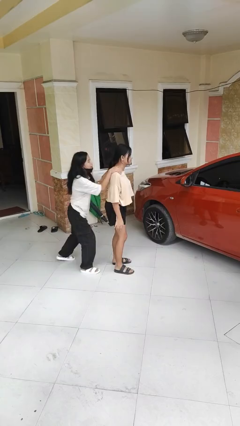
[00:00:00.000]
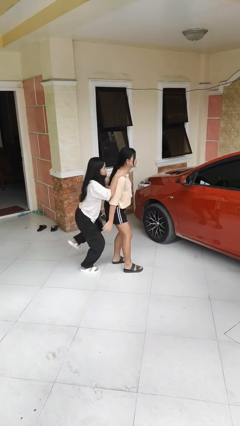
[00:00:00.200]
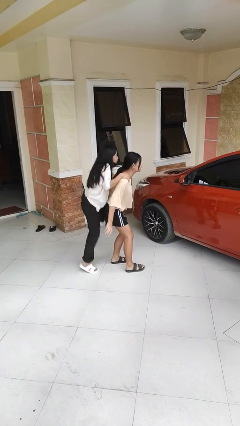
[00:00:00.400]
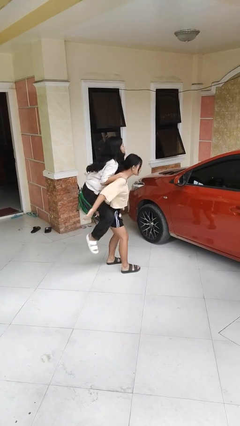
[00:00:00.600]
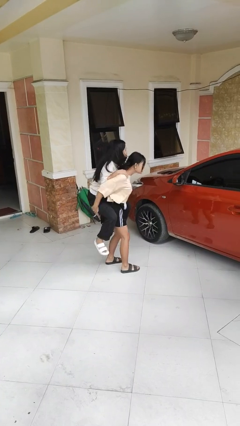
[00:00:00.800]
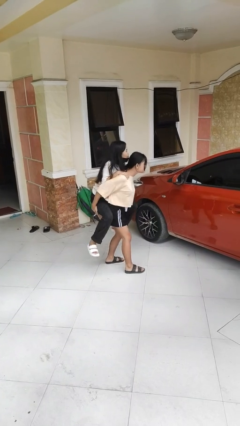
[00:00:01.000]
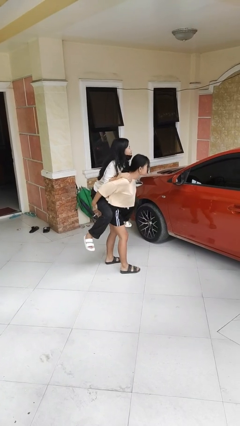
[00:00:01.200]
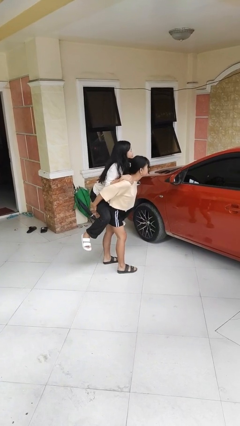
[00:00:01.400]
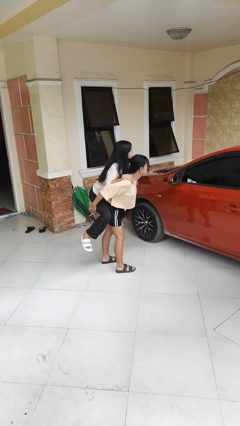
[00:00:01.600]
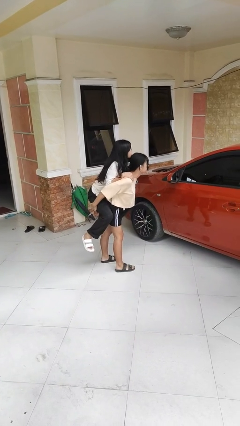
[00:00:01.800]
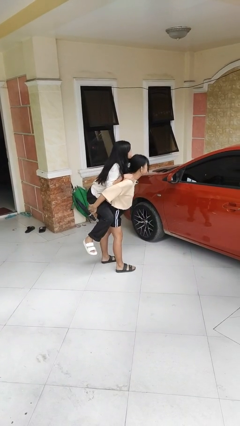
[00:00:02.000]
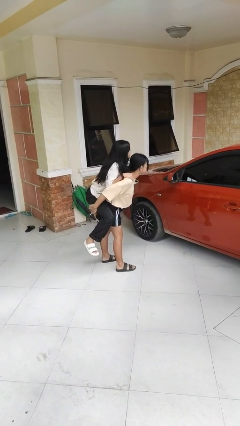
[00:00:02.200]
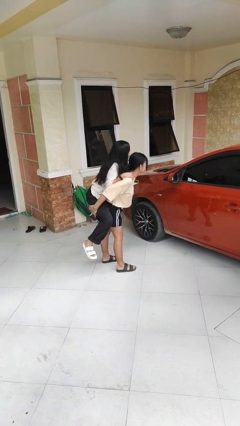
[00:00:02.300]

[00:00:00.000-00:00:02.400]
person carries person over shoulder

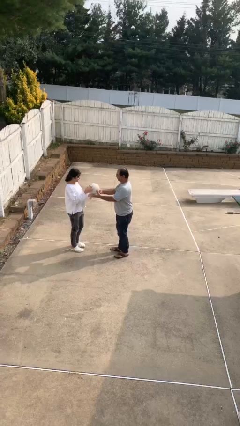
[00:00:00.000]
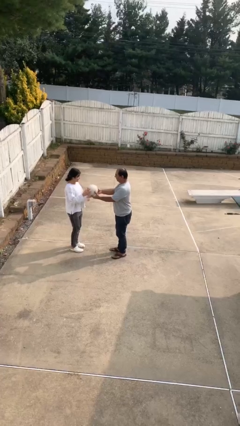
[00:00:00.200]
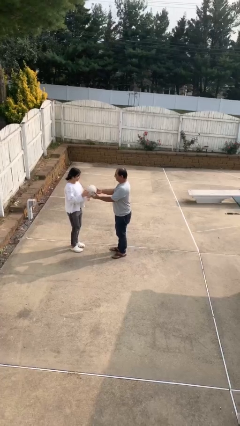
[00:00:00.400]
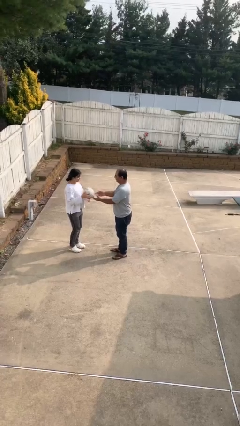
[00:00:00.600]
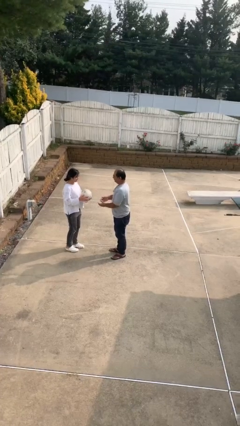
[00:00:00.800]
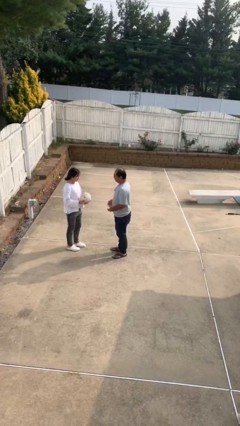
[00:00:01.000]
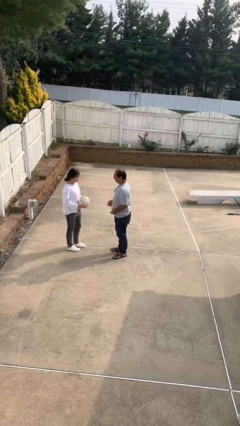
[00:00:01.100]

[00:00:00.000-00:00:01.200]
person transfers object to person

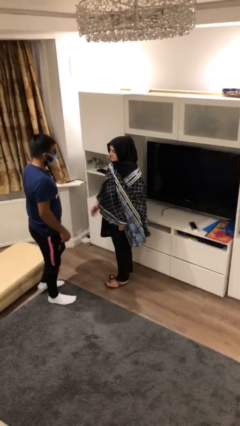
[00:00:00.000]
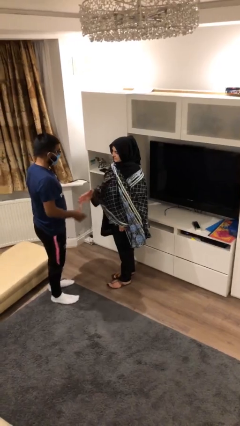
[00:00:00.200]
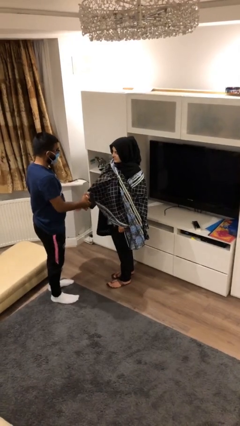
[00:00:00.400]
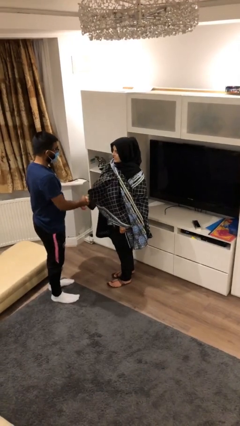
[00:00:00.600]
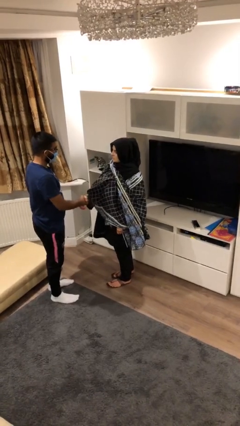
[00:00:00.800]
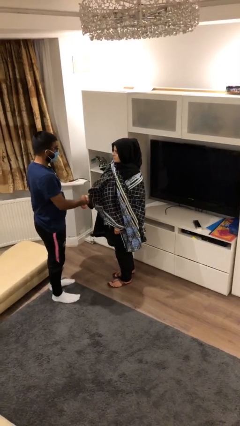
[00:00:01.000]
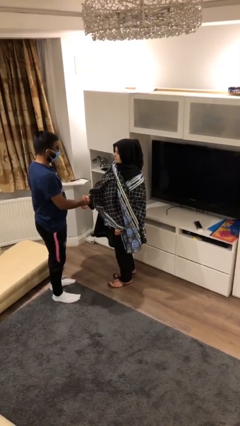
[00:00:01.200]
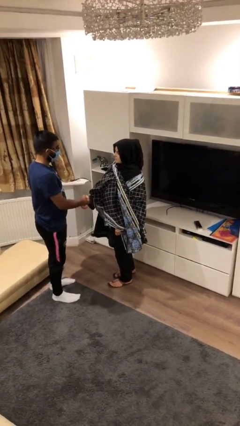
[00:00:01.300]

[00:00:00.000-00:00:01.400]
person shakes hand

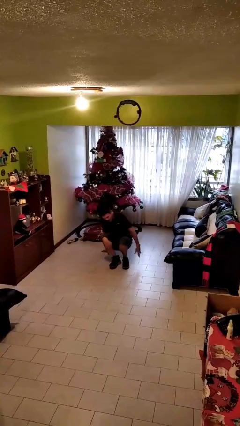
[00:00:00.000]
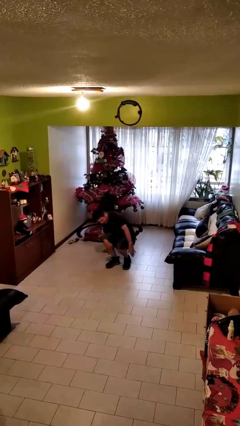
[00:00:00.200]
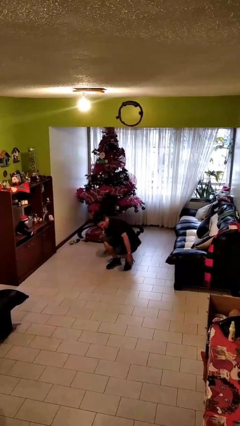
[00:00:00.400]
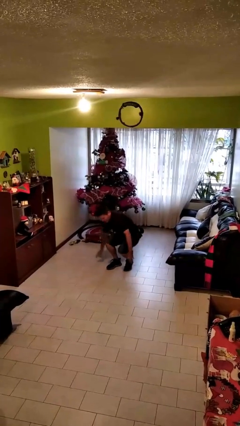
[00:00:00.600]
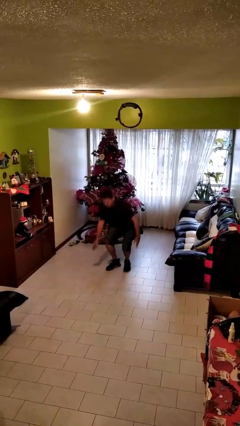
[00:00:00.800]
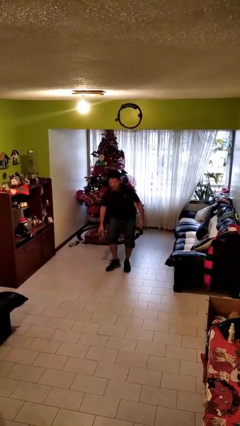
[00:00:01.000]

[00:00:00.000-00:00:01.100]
person stands up

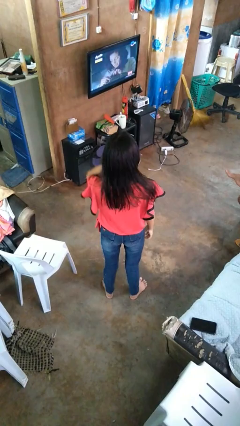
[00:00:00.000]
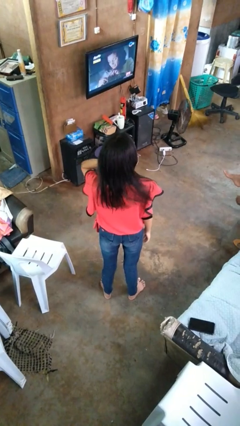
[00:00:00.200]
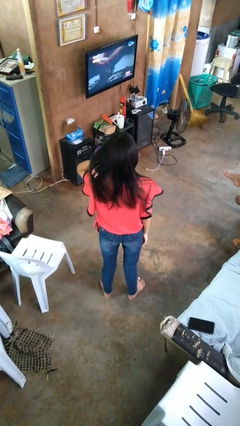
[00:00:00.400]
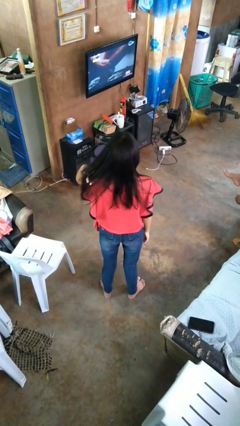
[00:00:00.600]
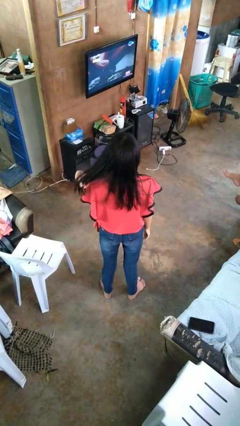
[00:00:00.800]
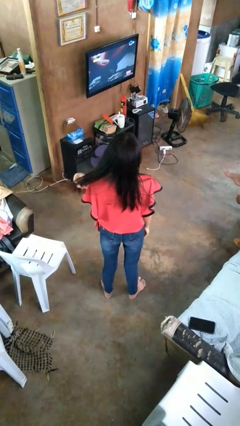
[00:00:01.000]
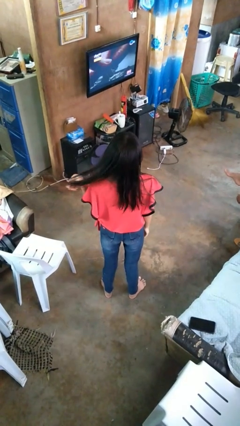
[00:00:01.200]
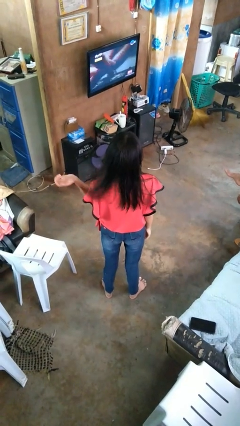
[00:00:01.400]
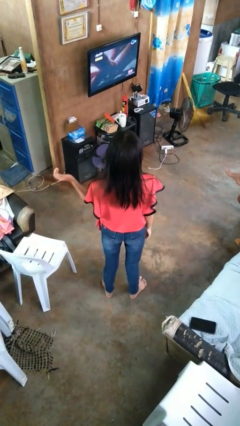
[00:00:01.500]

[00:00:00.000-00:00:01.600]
person strokes hair

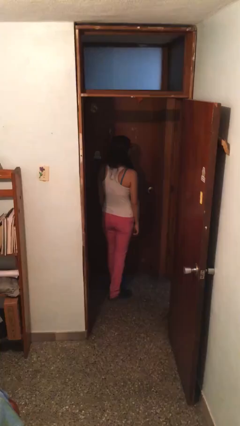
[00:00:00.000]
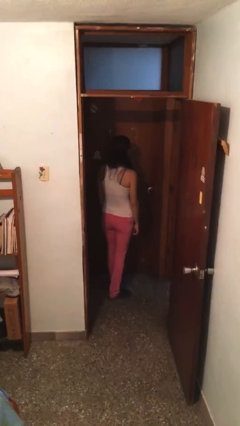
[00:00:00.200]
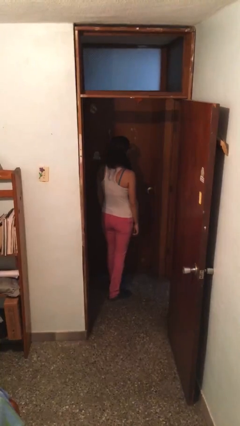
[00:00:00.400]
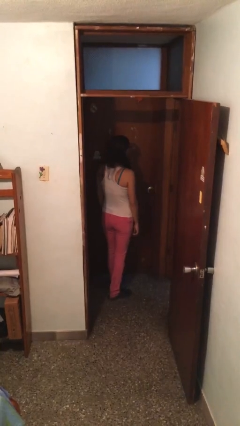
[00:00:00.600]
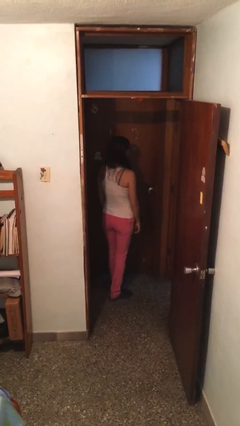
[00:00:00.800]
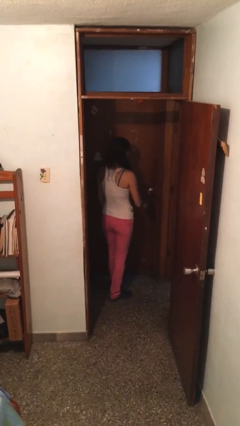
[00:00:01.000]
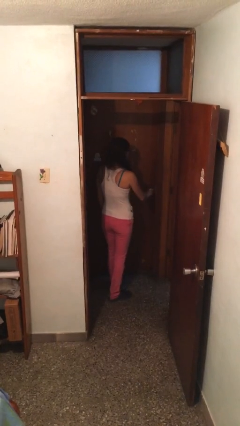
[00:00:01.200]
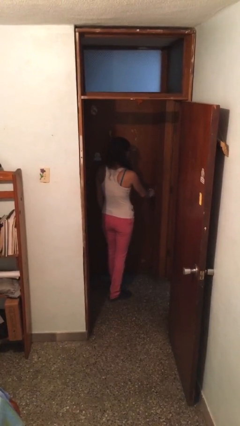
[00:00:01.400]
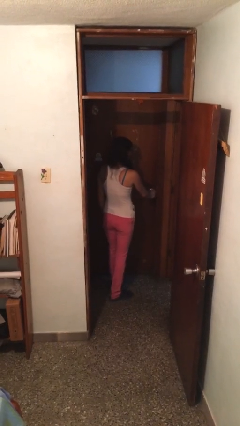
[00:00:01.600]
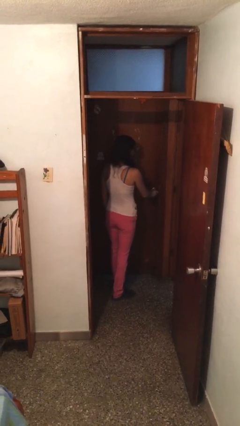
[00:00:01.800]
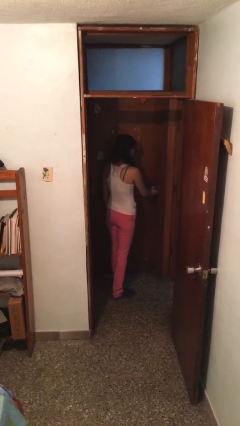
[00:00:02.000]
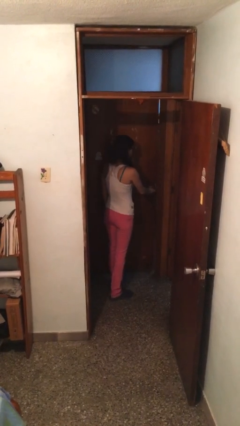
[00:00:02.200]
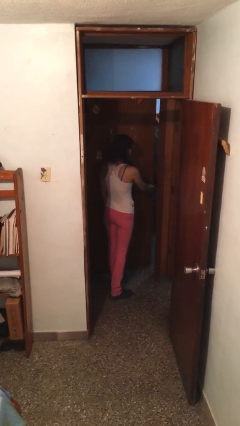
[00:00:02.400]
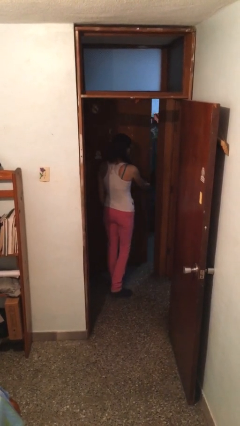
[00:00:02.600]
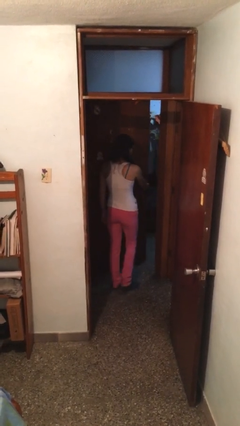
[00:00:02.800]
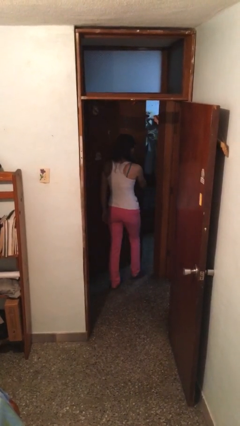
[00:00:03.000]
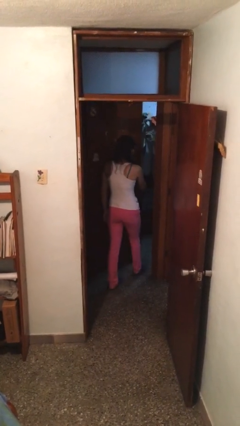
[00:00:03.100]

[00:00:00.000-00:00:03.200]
person opens facility door

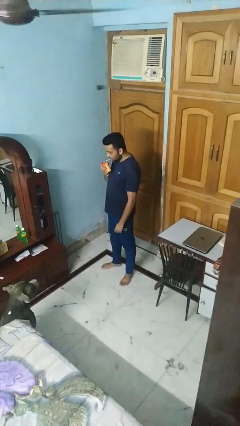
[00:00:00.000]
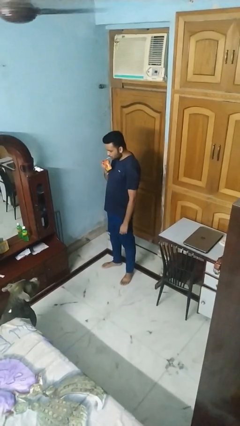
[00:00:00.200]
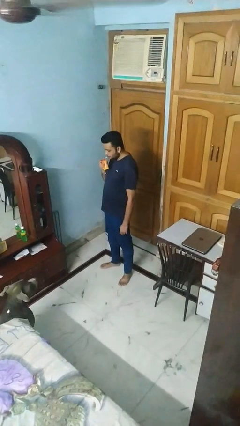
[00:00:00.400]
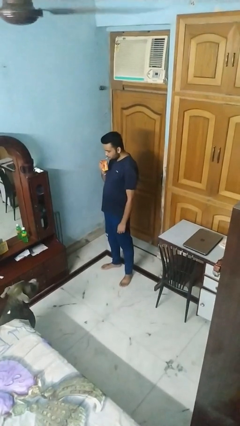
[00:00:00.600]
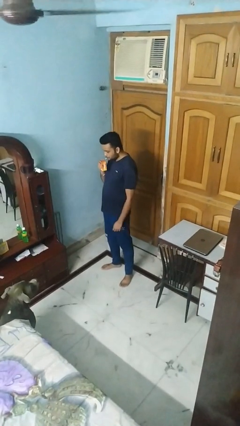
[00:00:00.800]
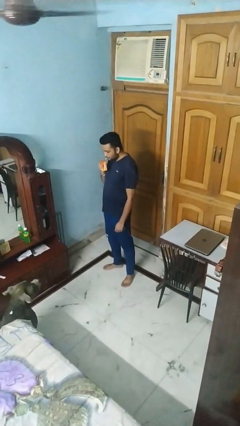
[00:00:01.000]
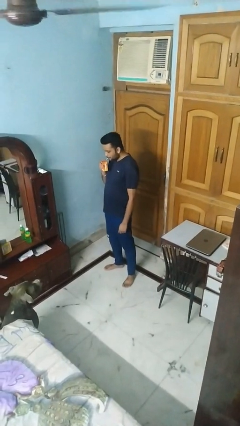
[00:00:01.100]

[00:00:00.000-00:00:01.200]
person drinks from straw

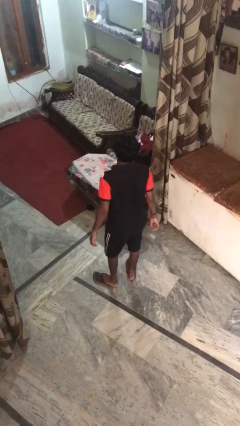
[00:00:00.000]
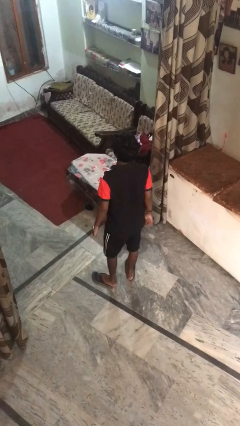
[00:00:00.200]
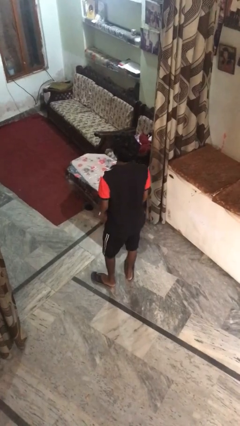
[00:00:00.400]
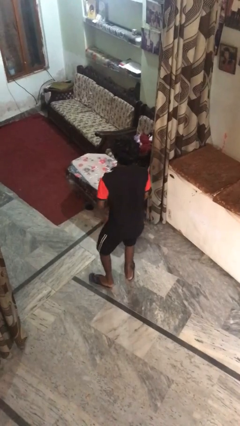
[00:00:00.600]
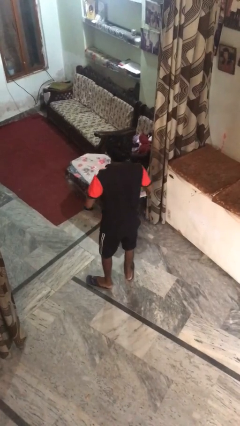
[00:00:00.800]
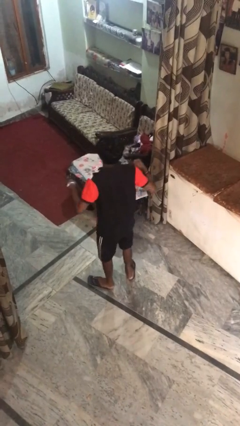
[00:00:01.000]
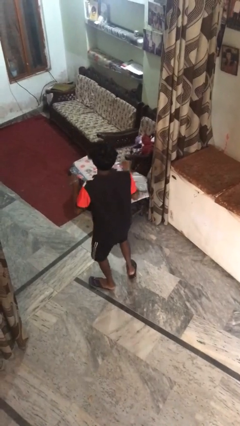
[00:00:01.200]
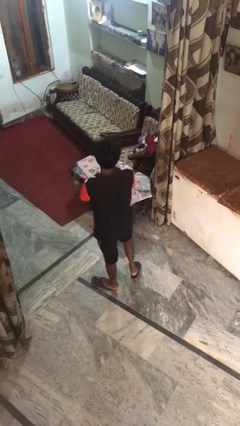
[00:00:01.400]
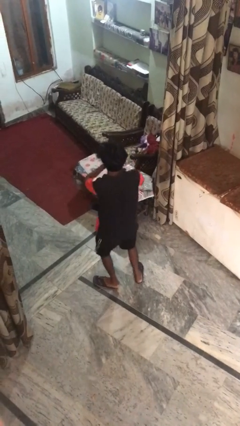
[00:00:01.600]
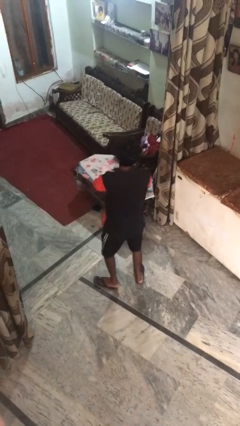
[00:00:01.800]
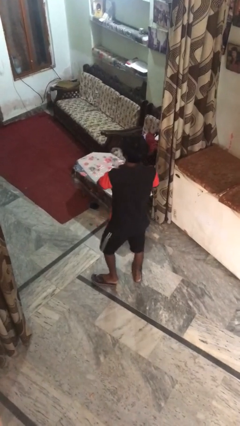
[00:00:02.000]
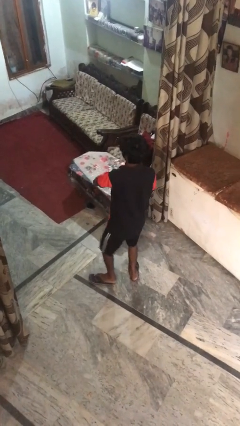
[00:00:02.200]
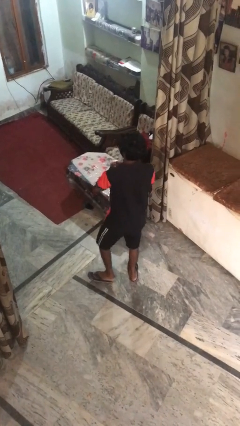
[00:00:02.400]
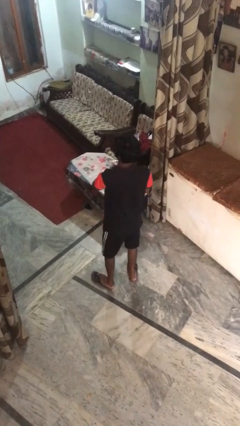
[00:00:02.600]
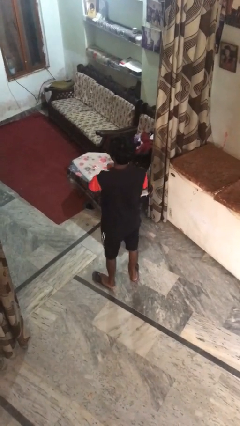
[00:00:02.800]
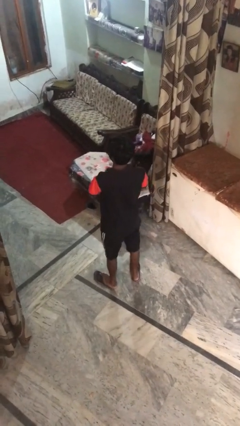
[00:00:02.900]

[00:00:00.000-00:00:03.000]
person dances in place

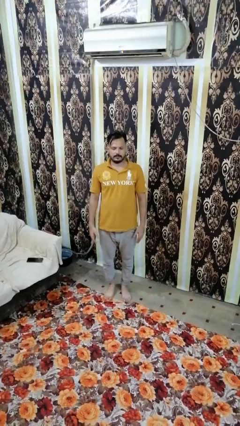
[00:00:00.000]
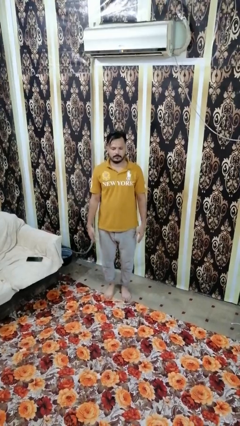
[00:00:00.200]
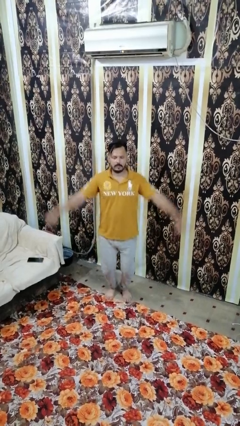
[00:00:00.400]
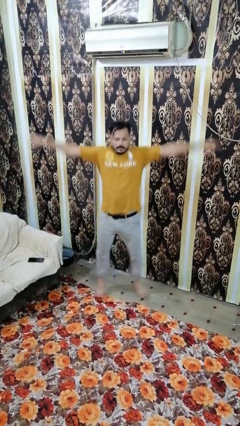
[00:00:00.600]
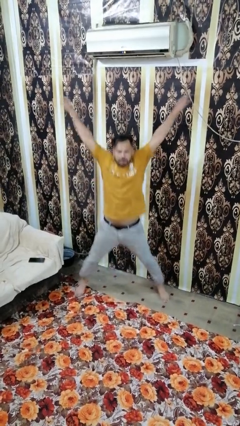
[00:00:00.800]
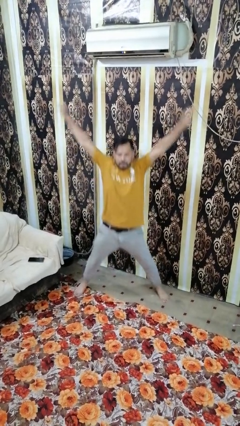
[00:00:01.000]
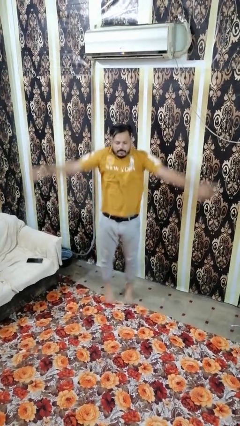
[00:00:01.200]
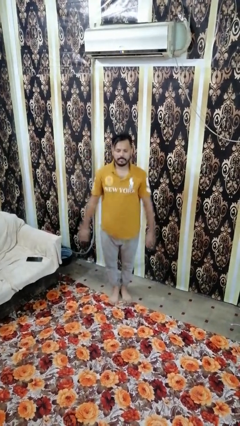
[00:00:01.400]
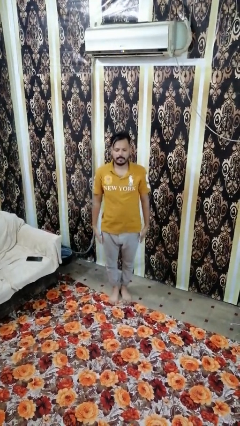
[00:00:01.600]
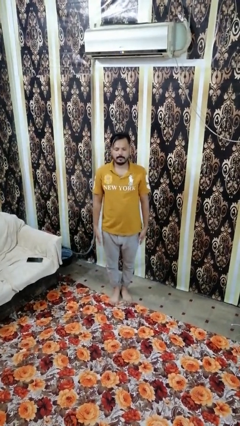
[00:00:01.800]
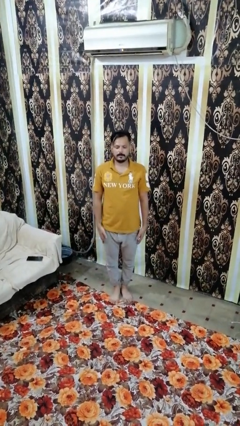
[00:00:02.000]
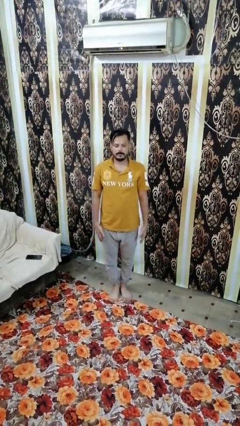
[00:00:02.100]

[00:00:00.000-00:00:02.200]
person exercises with jumping jacks
